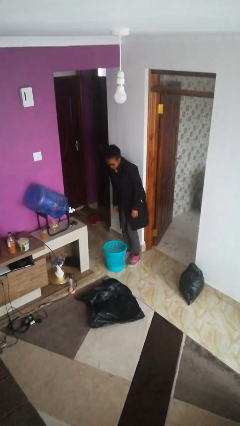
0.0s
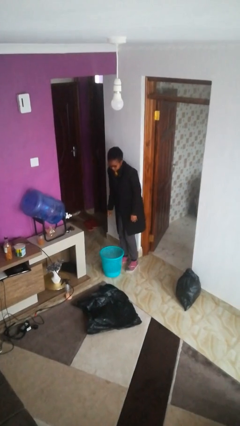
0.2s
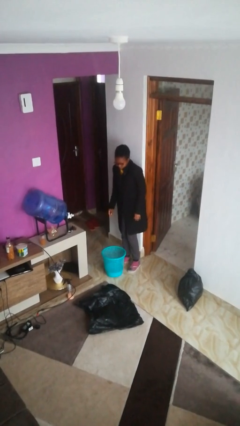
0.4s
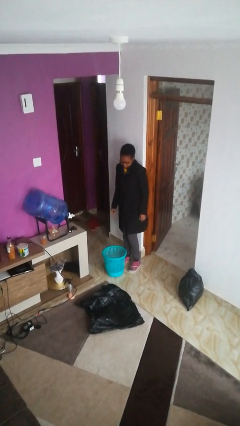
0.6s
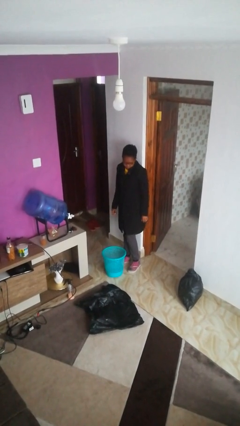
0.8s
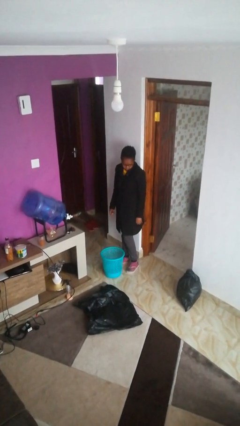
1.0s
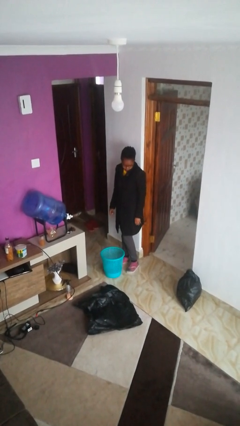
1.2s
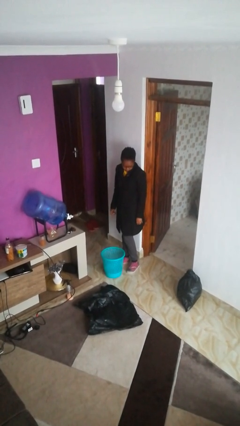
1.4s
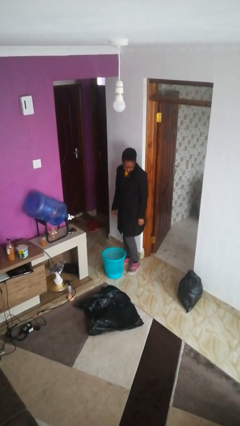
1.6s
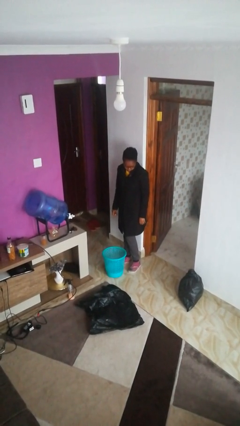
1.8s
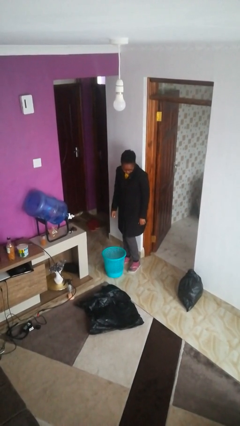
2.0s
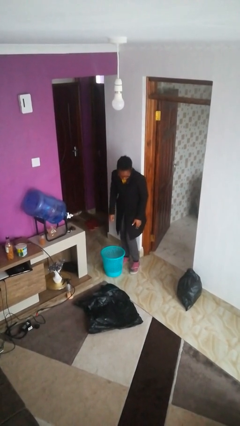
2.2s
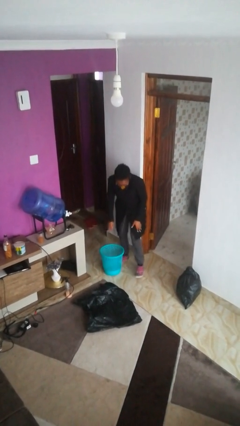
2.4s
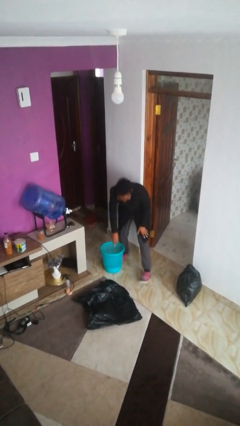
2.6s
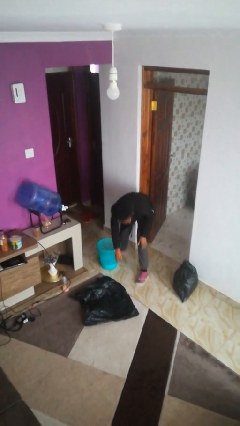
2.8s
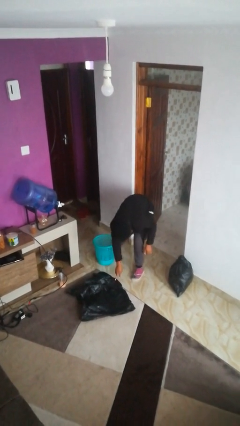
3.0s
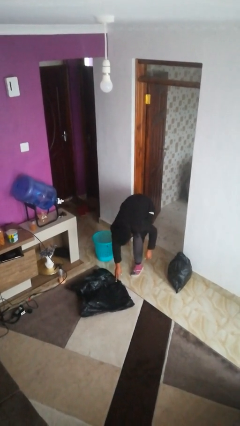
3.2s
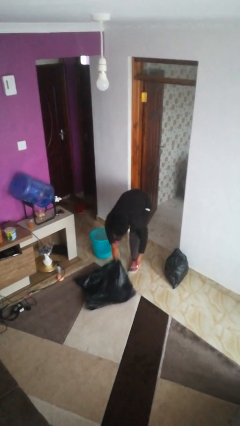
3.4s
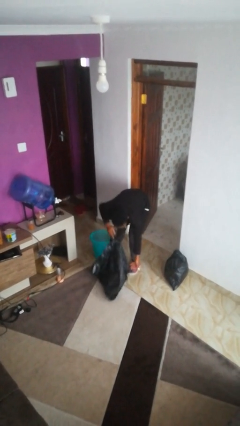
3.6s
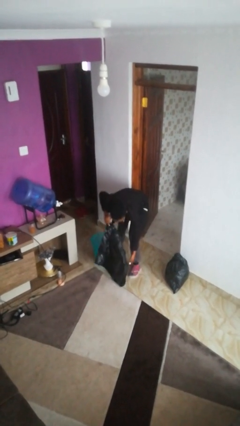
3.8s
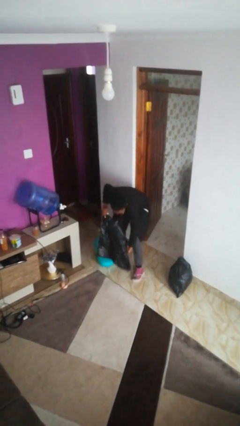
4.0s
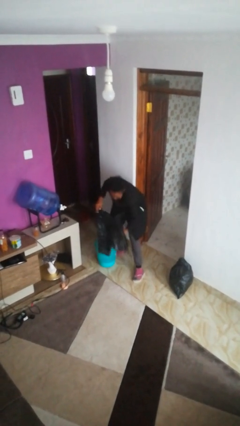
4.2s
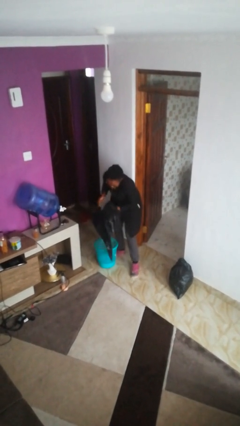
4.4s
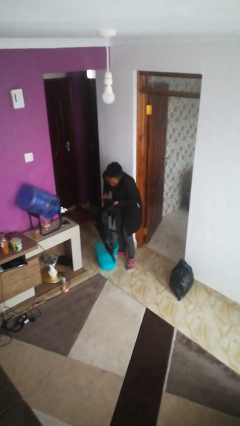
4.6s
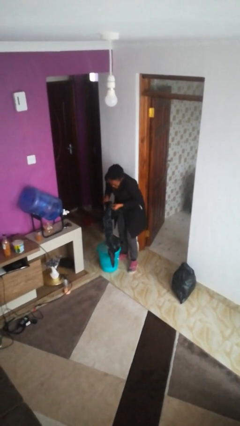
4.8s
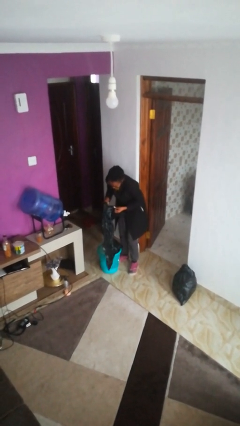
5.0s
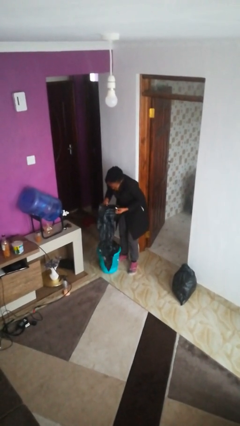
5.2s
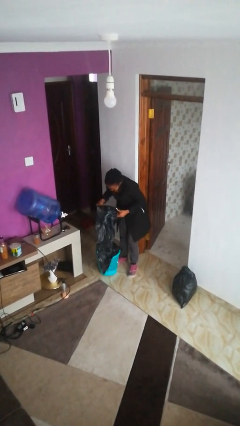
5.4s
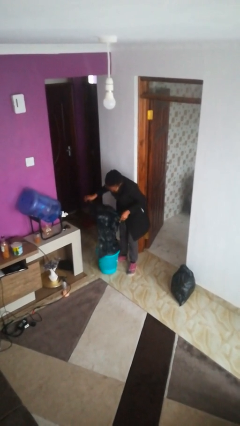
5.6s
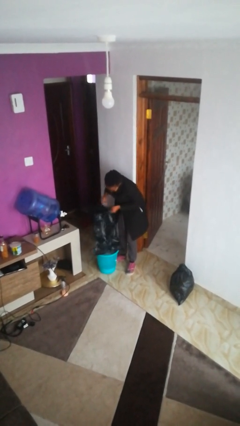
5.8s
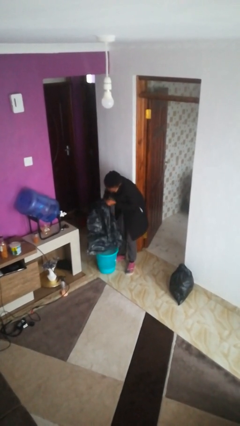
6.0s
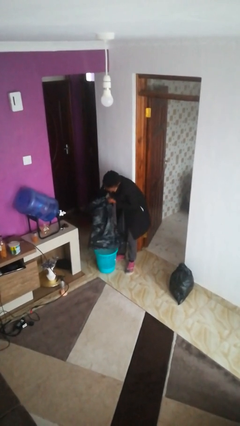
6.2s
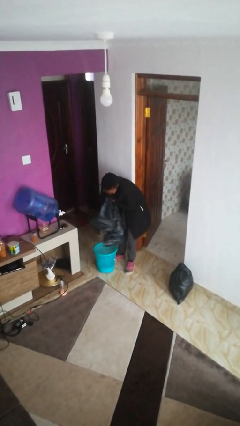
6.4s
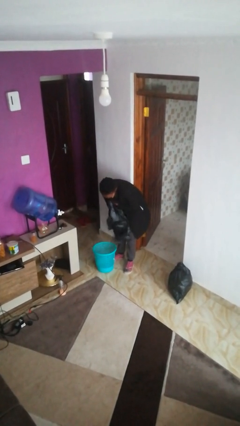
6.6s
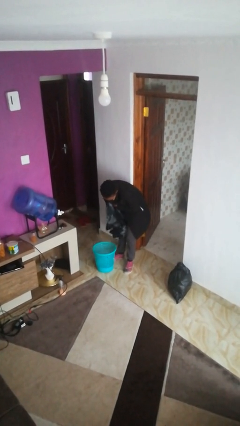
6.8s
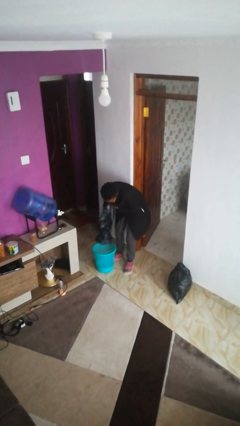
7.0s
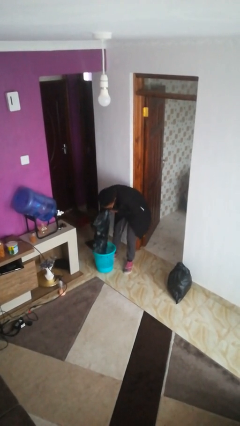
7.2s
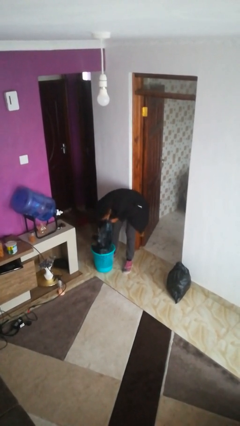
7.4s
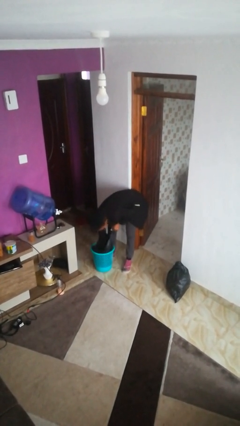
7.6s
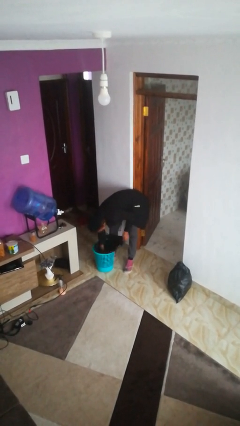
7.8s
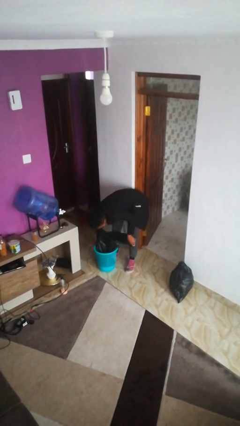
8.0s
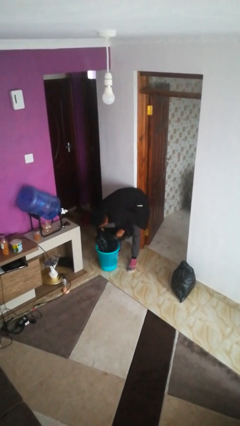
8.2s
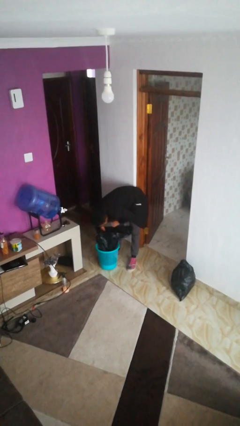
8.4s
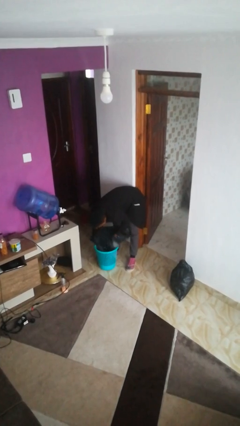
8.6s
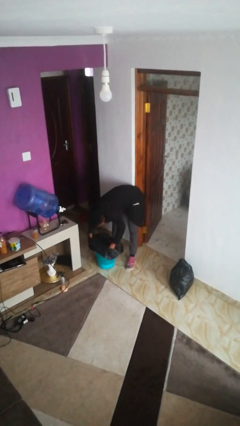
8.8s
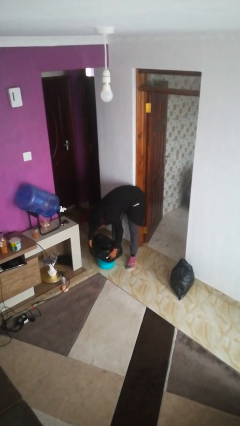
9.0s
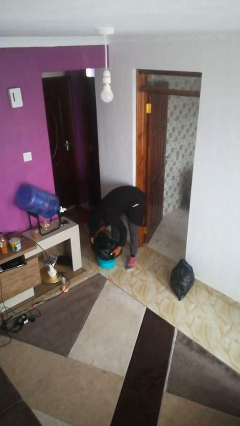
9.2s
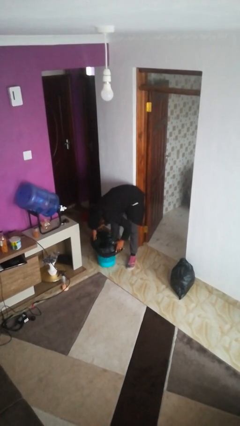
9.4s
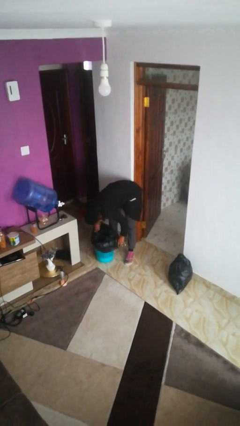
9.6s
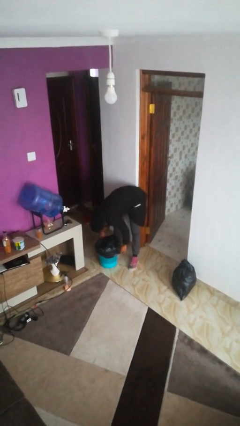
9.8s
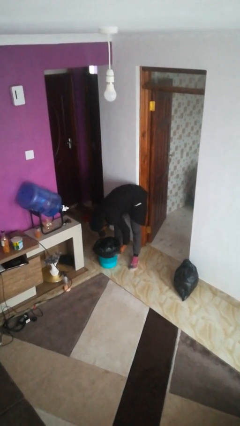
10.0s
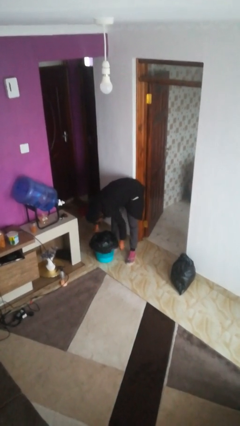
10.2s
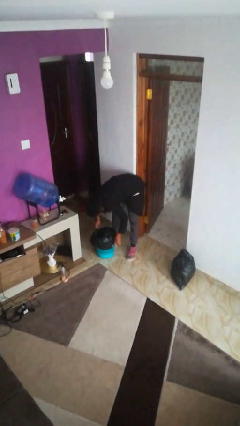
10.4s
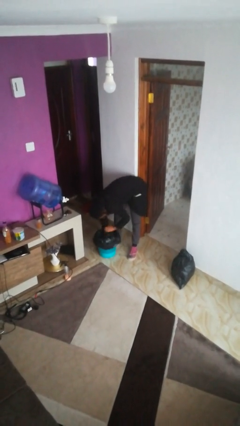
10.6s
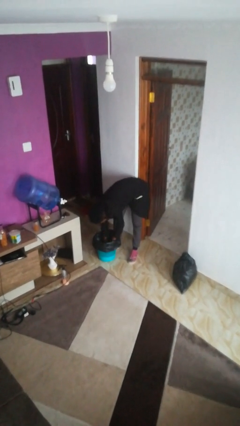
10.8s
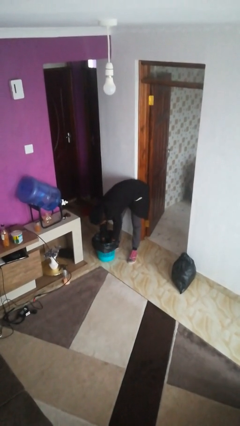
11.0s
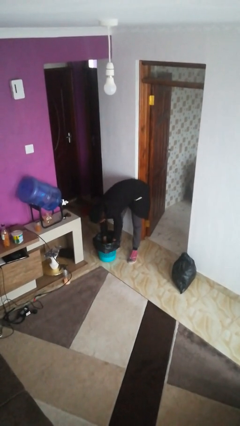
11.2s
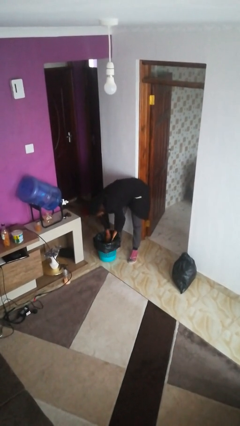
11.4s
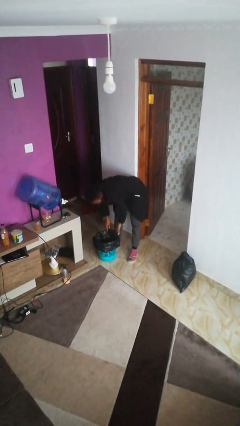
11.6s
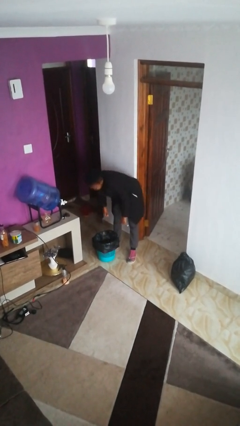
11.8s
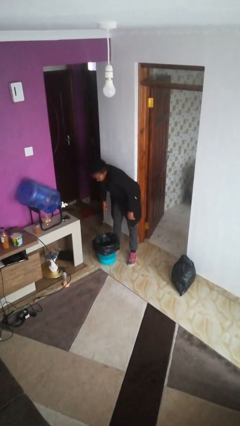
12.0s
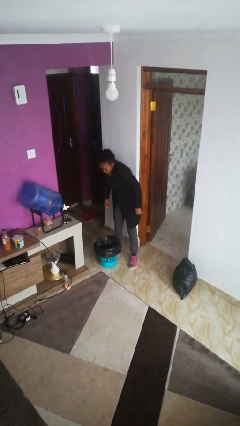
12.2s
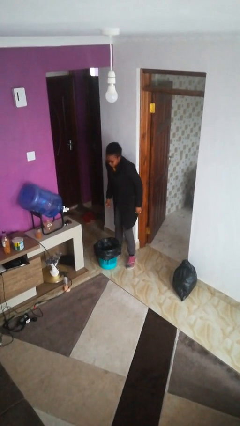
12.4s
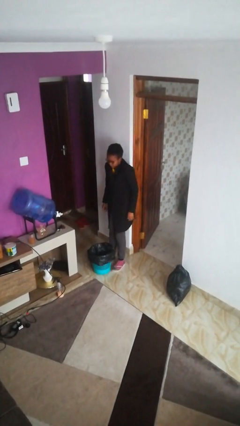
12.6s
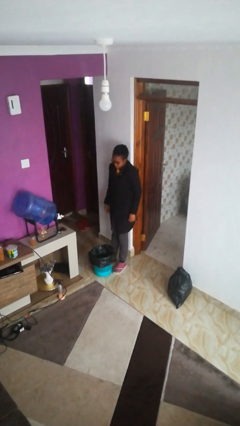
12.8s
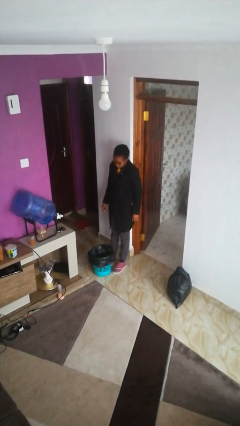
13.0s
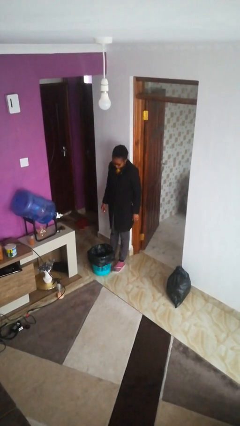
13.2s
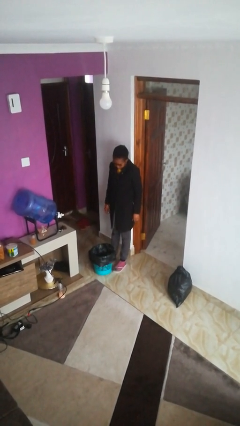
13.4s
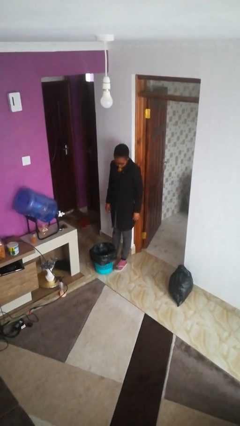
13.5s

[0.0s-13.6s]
person inserts trashbag into trashcan

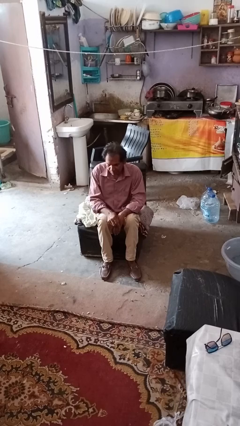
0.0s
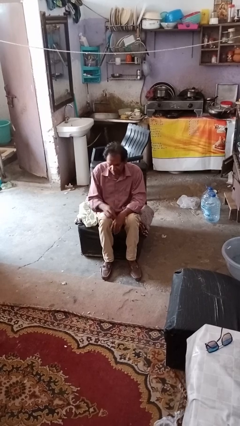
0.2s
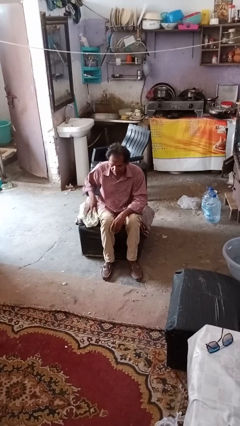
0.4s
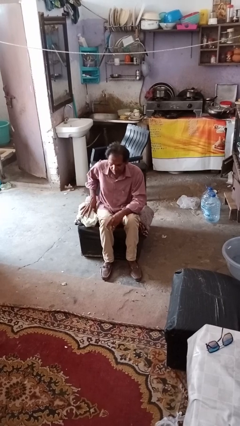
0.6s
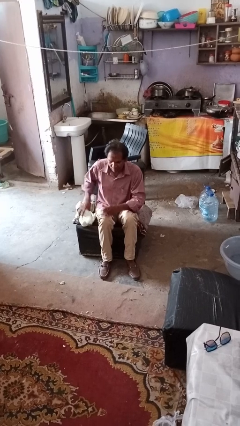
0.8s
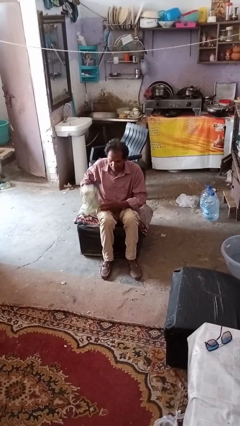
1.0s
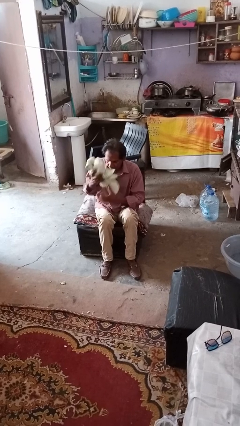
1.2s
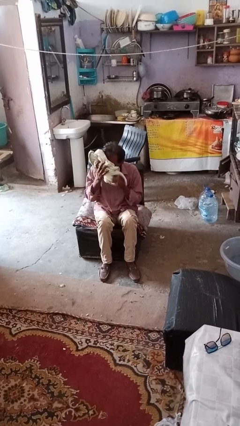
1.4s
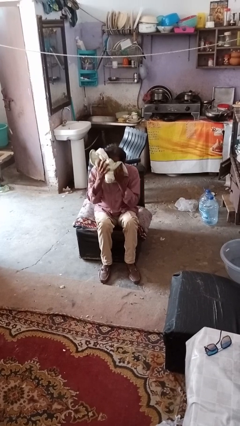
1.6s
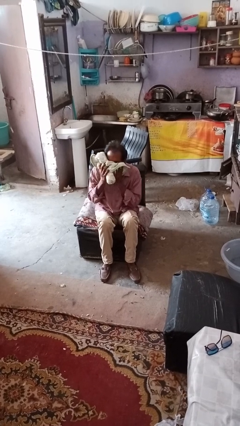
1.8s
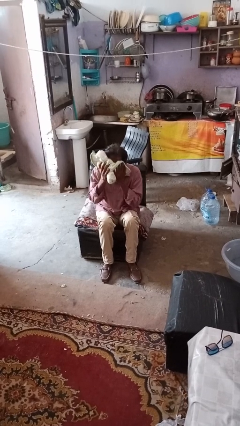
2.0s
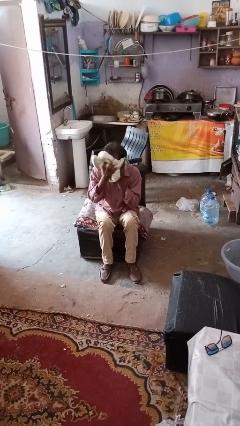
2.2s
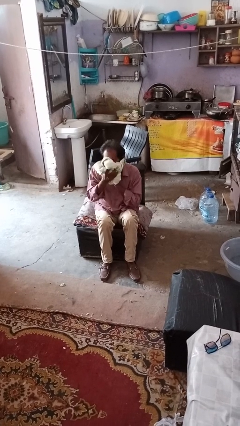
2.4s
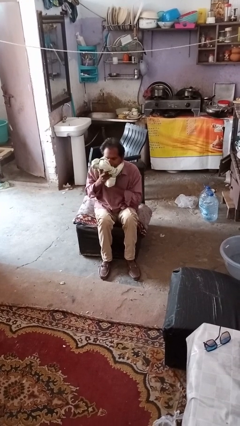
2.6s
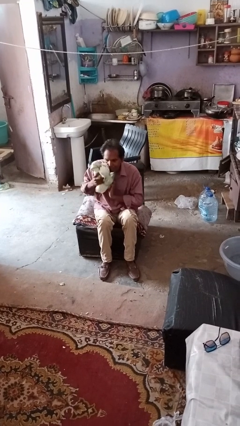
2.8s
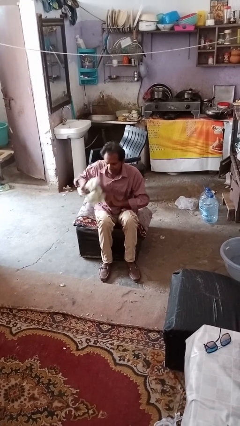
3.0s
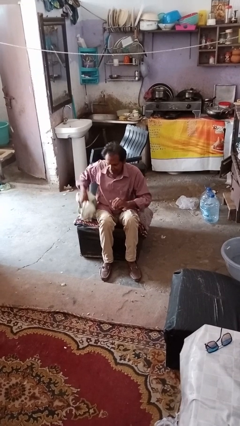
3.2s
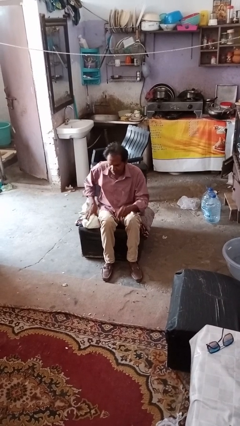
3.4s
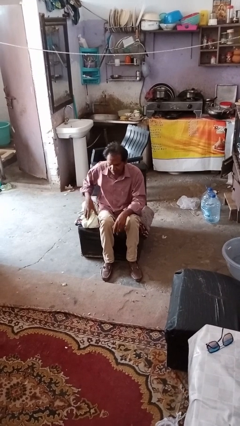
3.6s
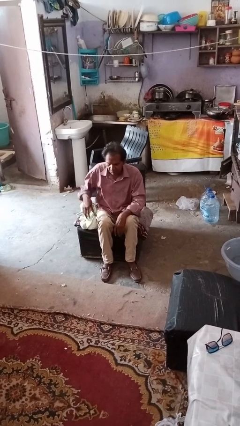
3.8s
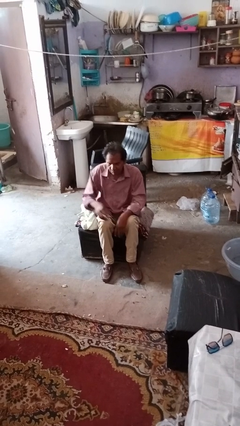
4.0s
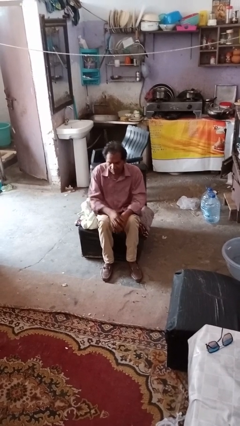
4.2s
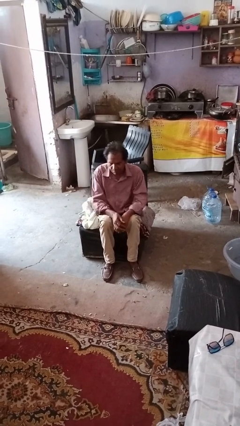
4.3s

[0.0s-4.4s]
person wipes mouth with napkin
